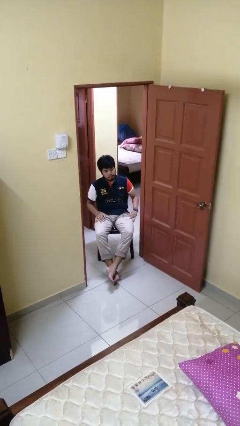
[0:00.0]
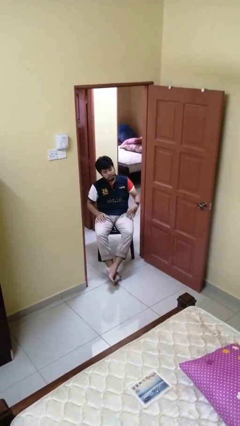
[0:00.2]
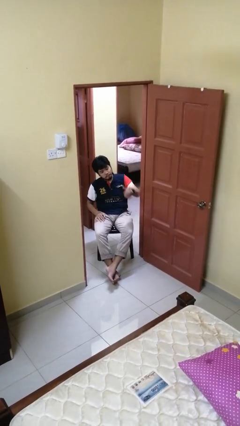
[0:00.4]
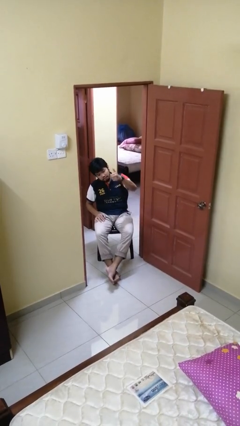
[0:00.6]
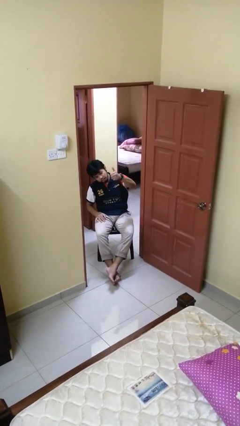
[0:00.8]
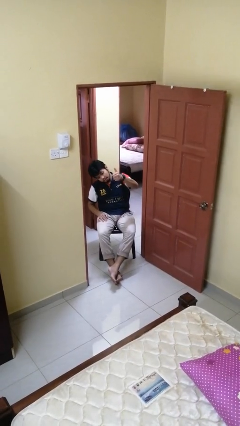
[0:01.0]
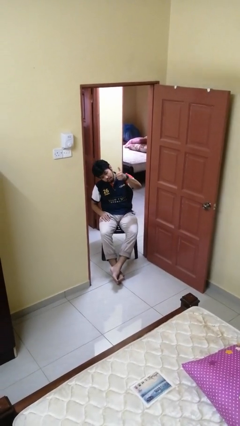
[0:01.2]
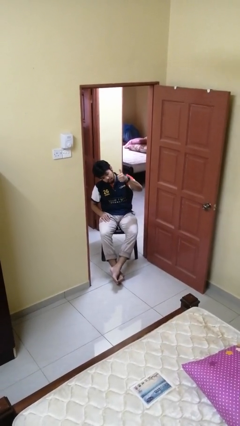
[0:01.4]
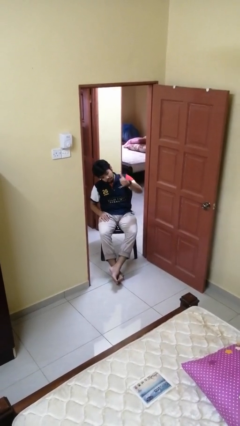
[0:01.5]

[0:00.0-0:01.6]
person gestures thumbs up

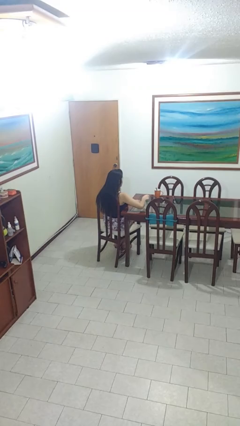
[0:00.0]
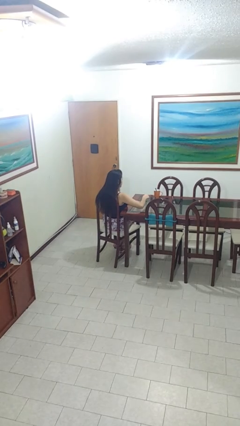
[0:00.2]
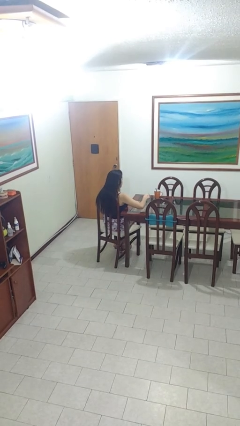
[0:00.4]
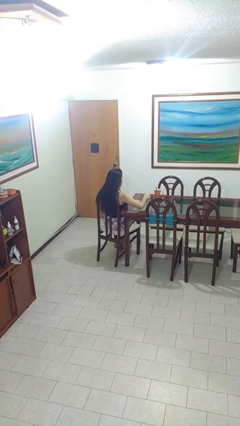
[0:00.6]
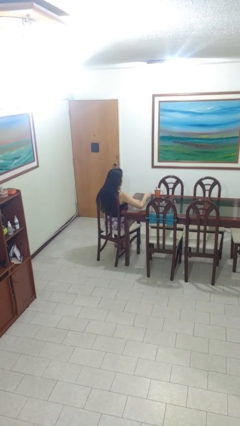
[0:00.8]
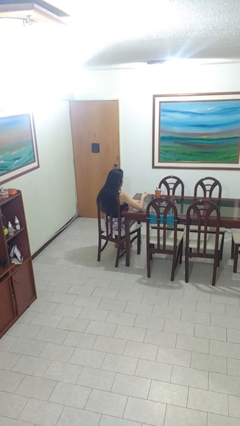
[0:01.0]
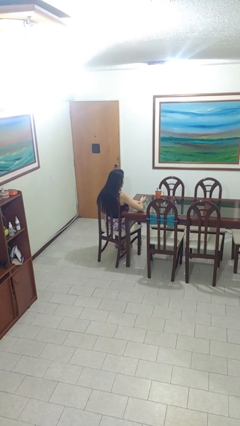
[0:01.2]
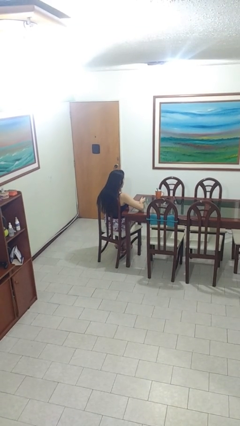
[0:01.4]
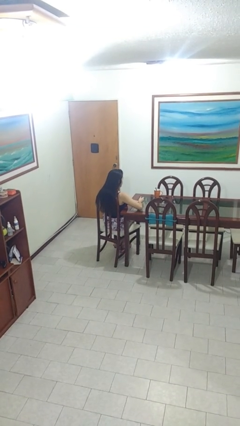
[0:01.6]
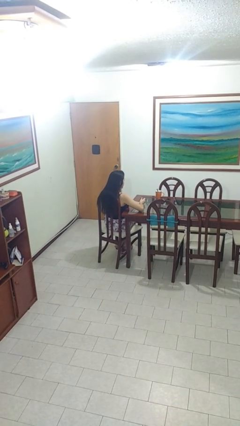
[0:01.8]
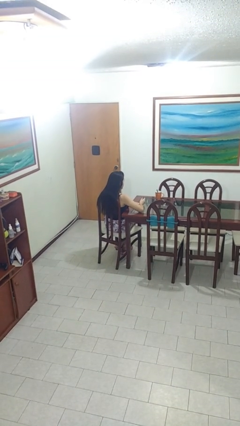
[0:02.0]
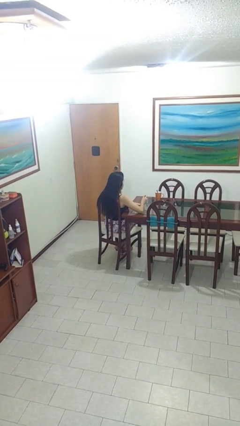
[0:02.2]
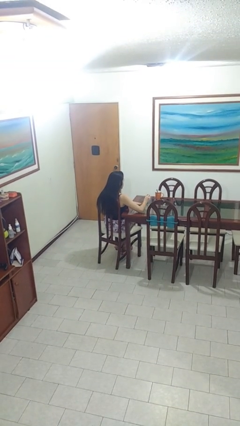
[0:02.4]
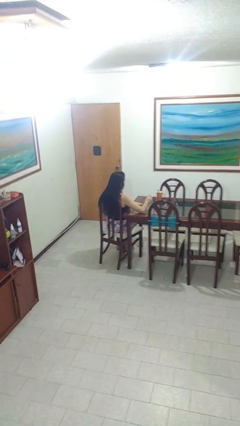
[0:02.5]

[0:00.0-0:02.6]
person paints fingernails

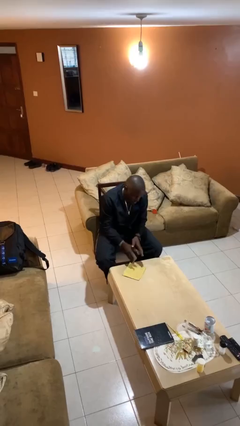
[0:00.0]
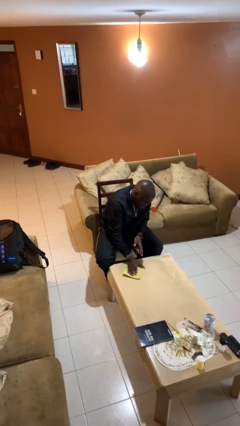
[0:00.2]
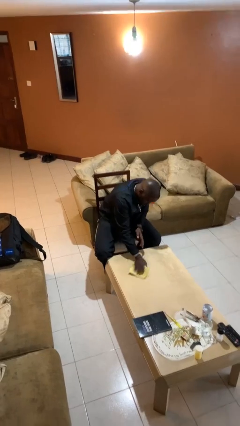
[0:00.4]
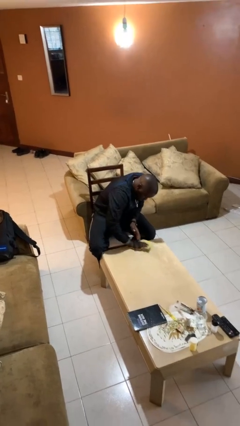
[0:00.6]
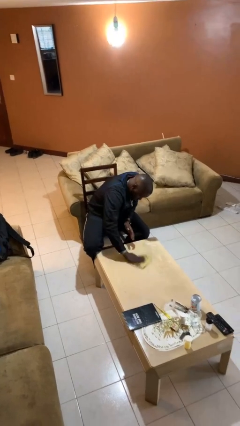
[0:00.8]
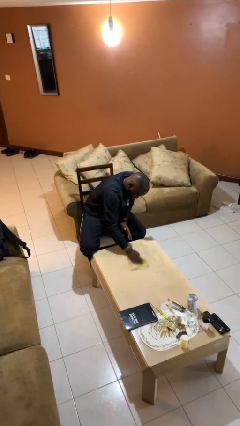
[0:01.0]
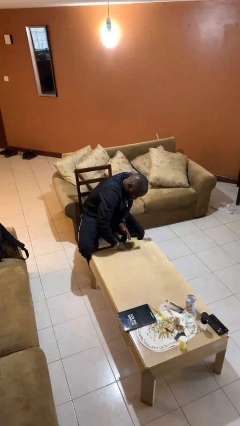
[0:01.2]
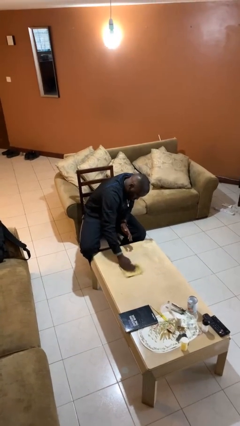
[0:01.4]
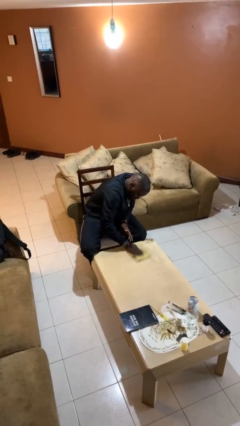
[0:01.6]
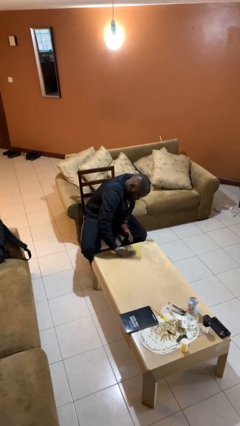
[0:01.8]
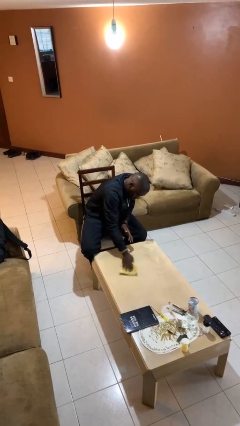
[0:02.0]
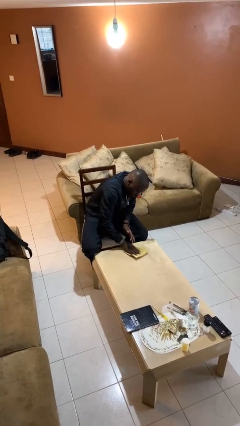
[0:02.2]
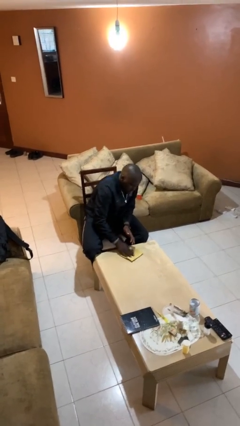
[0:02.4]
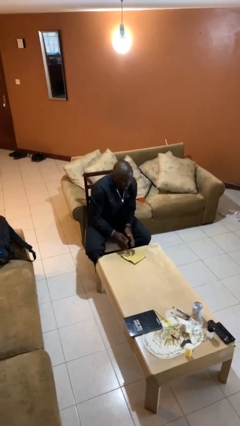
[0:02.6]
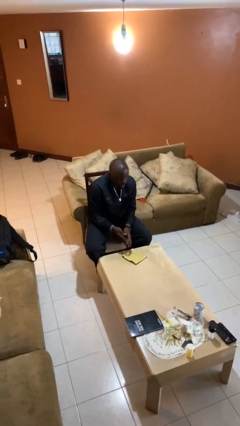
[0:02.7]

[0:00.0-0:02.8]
person cleans table with rag

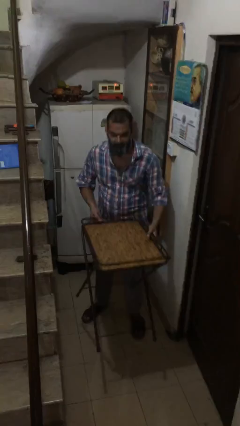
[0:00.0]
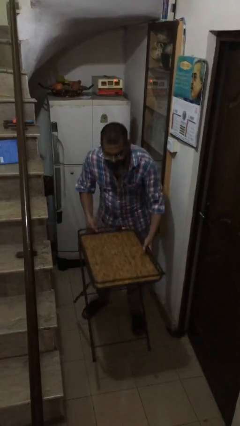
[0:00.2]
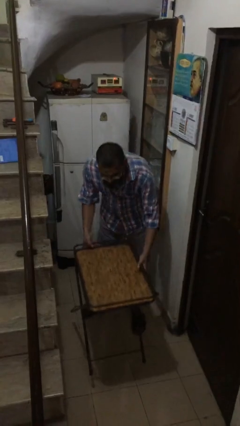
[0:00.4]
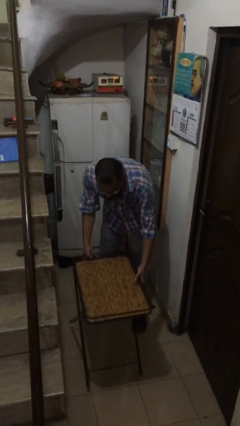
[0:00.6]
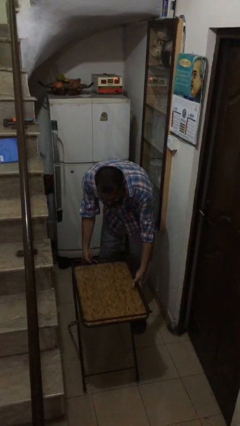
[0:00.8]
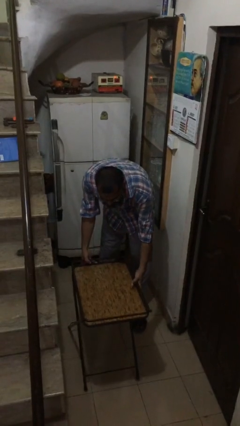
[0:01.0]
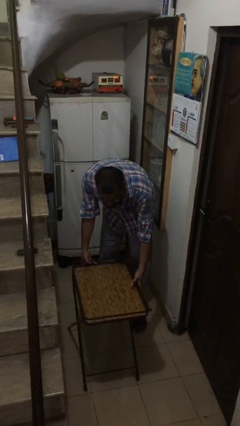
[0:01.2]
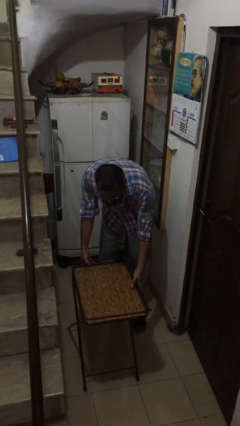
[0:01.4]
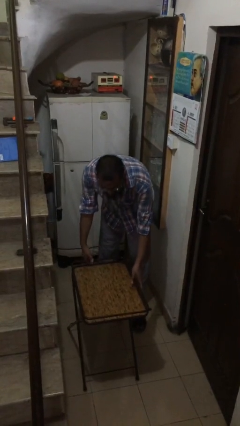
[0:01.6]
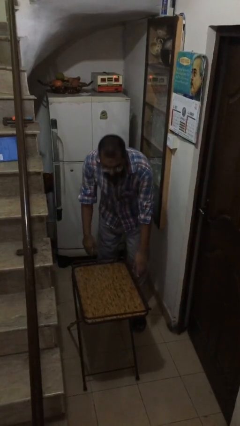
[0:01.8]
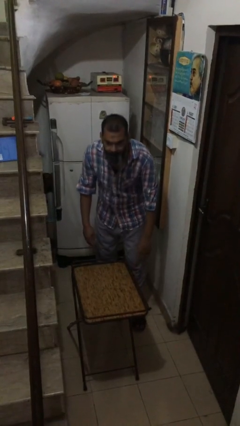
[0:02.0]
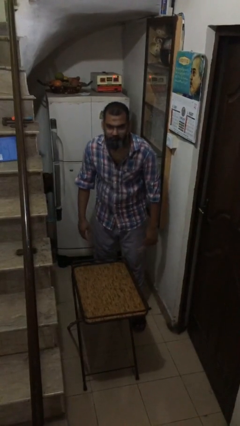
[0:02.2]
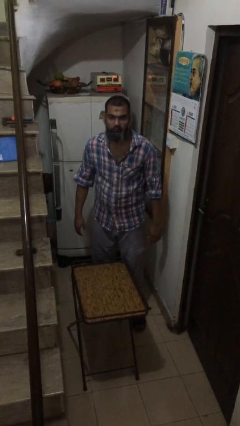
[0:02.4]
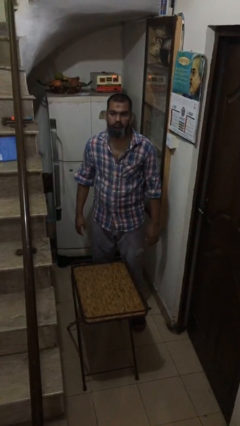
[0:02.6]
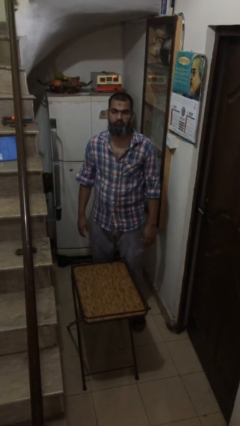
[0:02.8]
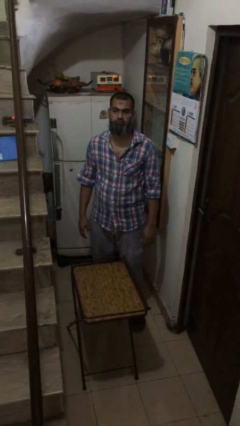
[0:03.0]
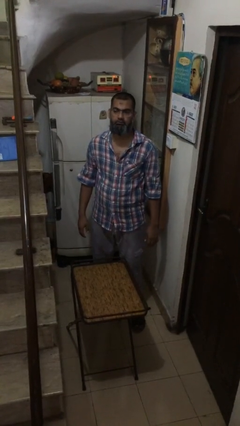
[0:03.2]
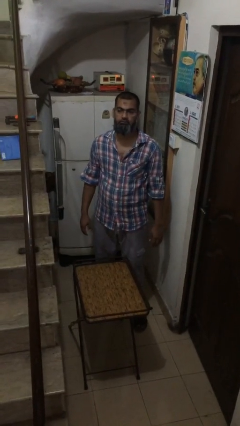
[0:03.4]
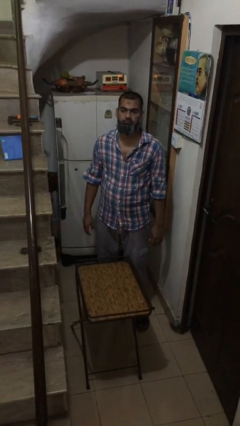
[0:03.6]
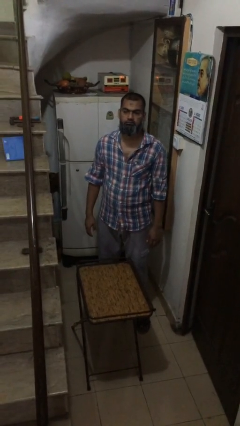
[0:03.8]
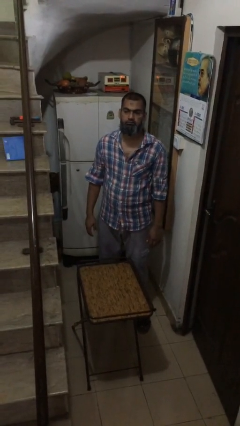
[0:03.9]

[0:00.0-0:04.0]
person puts down object on floor

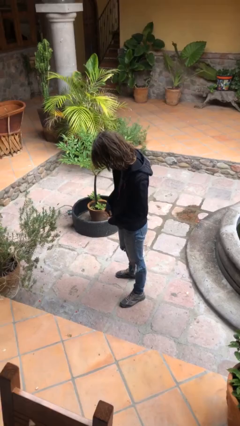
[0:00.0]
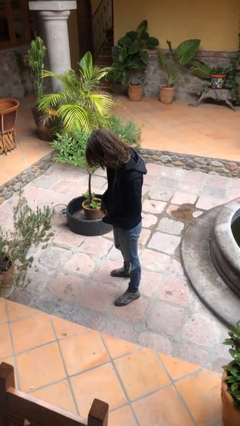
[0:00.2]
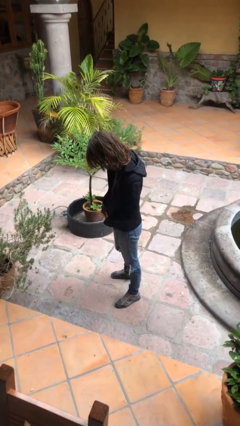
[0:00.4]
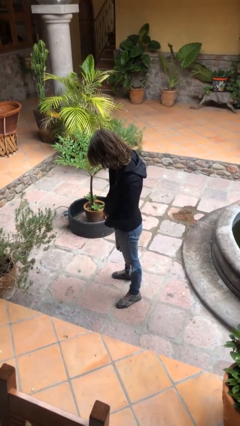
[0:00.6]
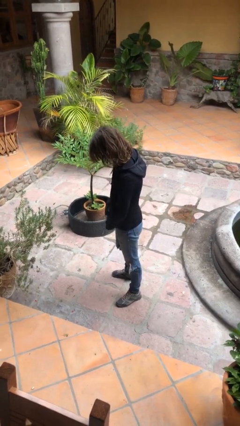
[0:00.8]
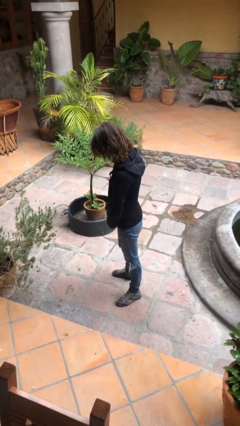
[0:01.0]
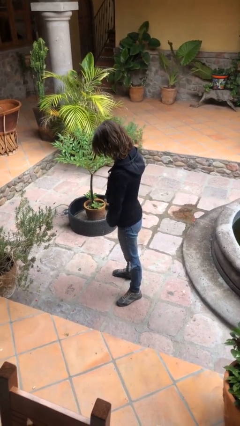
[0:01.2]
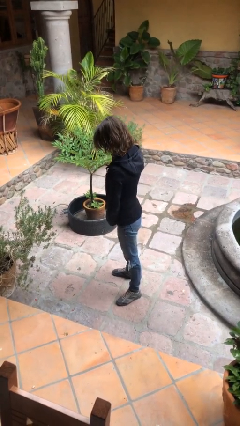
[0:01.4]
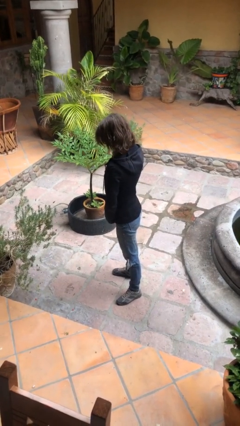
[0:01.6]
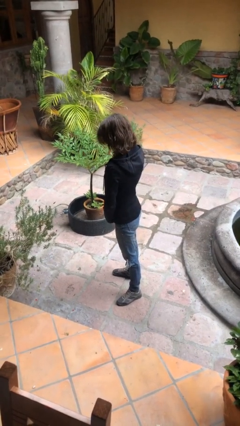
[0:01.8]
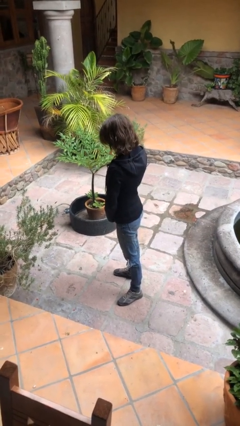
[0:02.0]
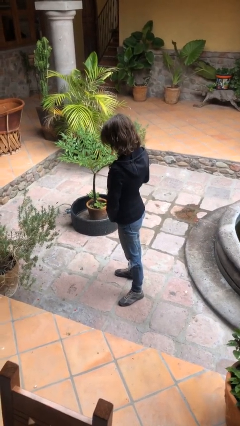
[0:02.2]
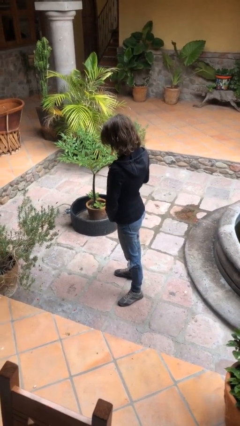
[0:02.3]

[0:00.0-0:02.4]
person zips up jacket

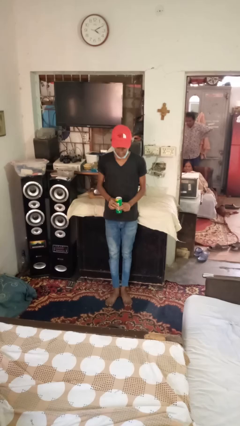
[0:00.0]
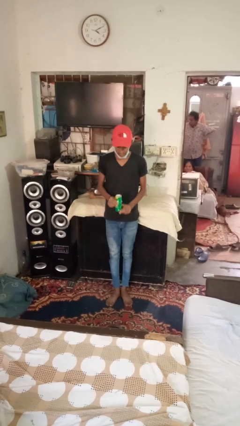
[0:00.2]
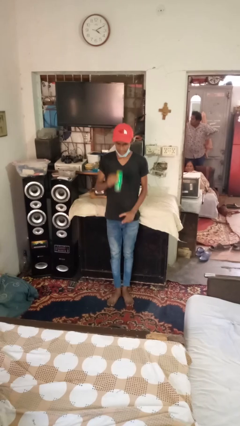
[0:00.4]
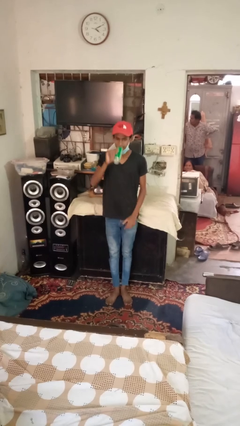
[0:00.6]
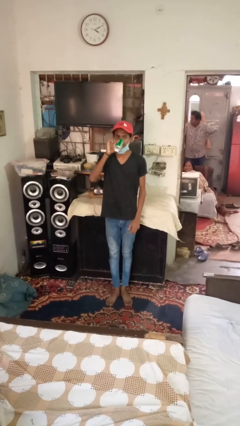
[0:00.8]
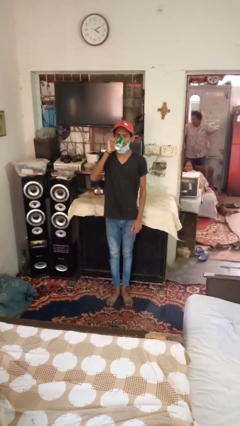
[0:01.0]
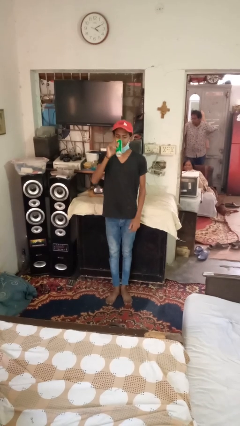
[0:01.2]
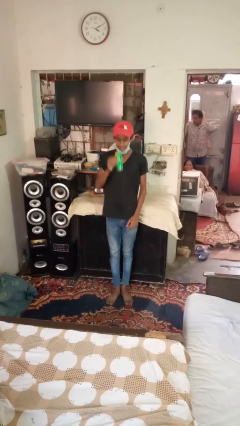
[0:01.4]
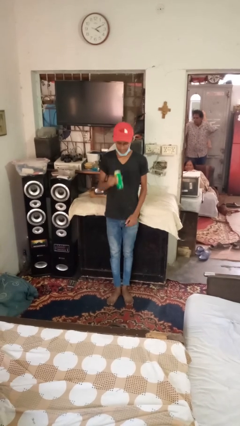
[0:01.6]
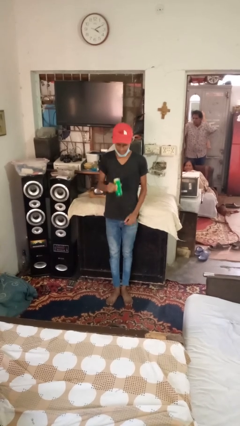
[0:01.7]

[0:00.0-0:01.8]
person drinks from beverage can

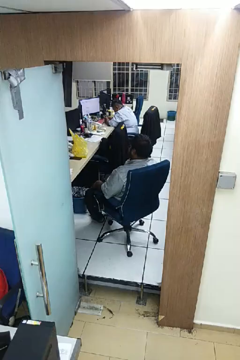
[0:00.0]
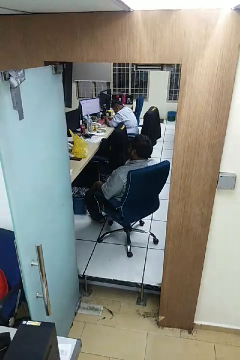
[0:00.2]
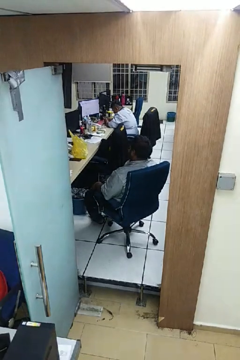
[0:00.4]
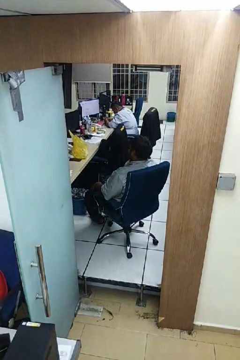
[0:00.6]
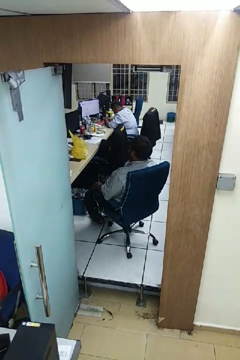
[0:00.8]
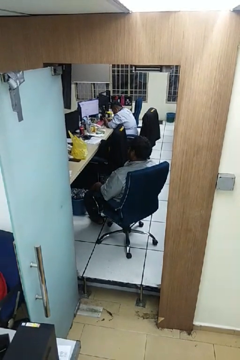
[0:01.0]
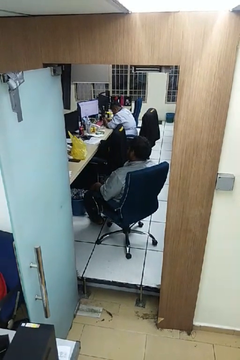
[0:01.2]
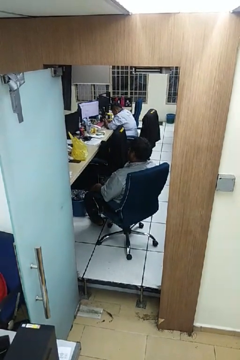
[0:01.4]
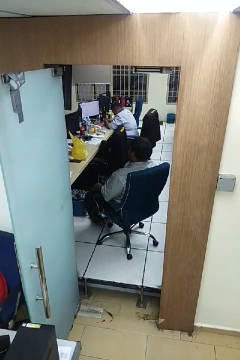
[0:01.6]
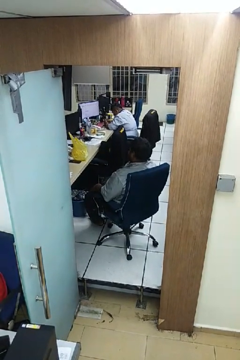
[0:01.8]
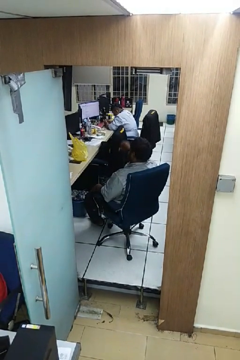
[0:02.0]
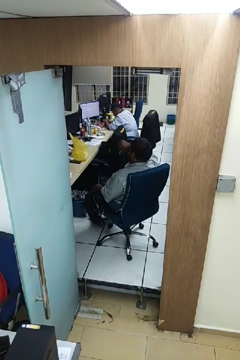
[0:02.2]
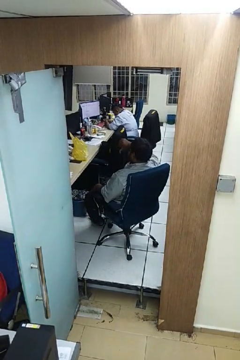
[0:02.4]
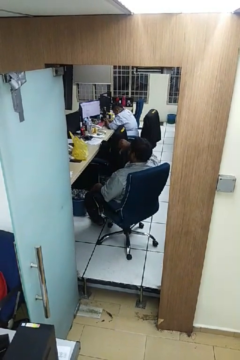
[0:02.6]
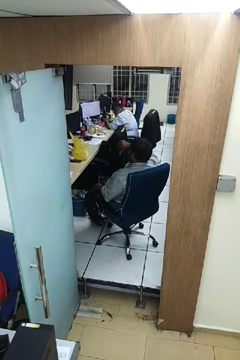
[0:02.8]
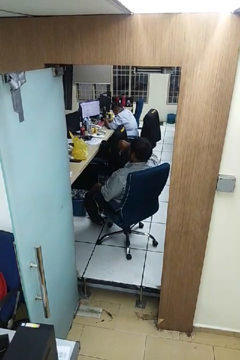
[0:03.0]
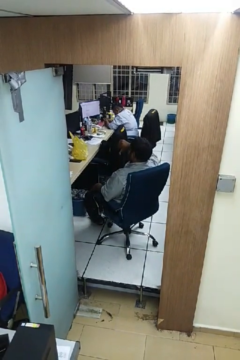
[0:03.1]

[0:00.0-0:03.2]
person gestures thumbs down
